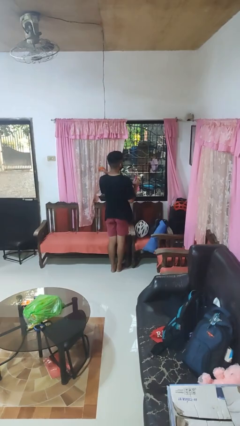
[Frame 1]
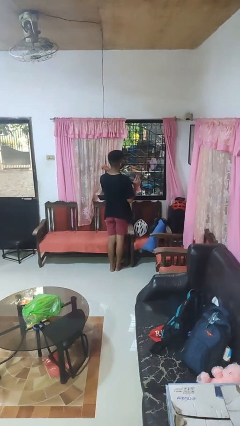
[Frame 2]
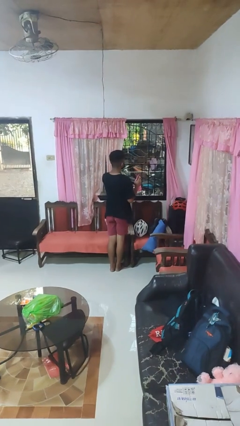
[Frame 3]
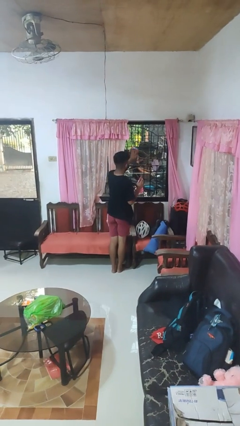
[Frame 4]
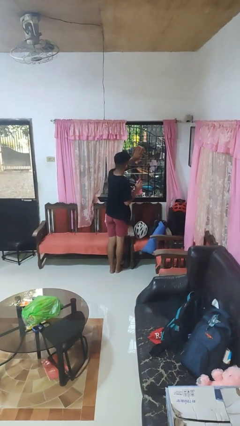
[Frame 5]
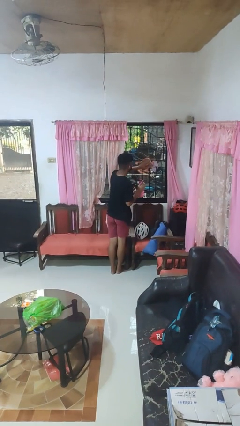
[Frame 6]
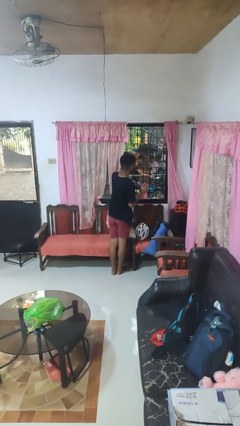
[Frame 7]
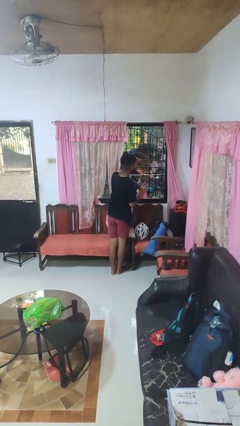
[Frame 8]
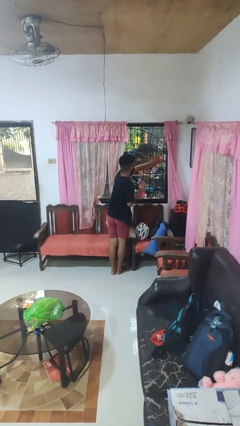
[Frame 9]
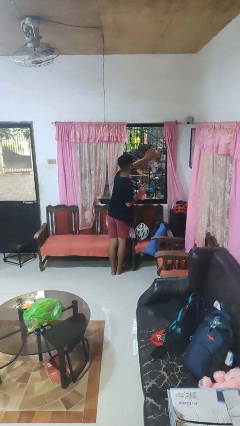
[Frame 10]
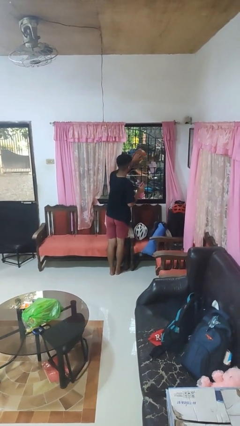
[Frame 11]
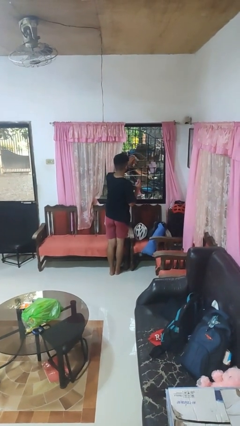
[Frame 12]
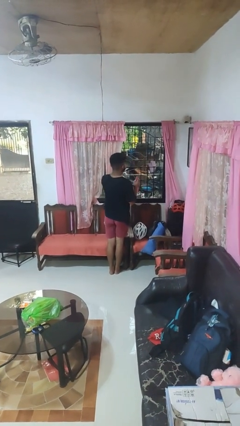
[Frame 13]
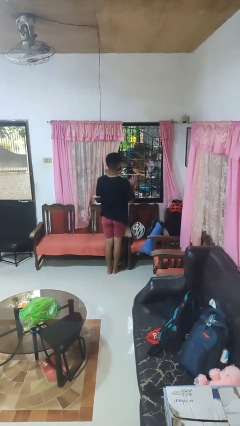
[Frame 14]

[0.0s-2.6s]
person washes window

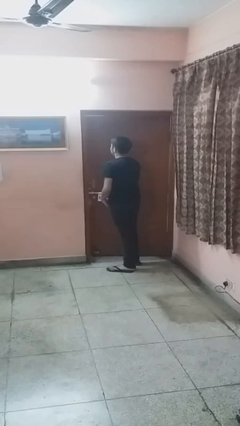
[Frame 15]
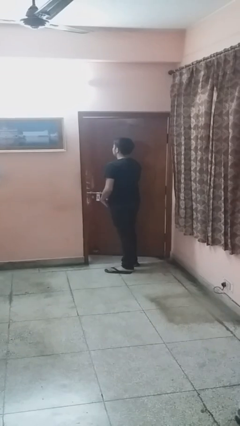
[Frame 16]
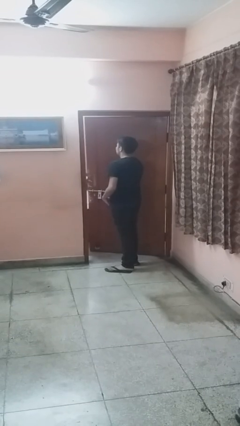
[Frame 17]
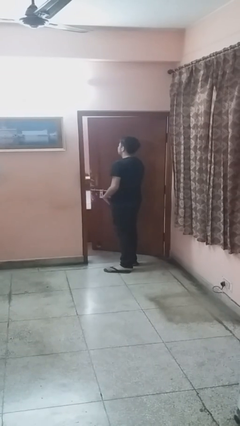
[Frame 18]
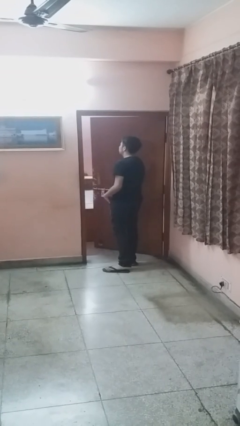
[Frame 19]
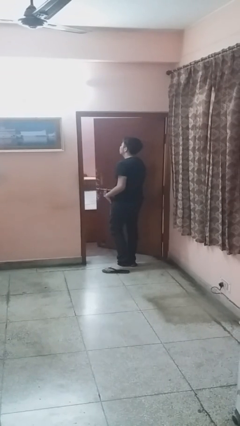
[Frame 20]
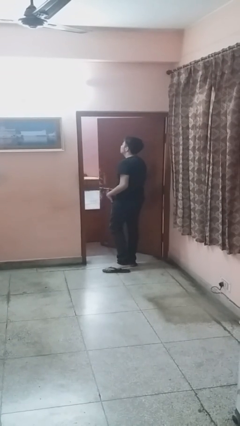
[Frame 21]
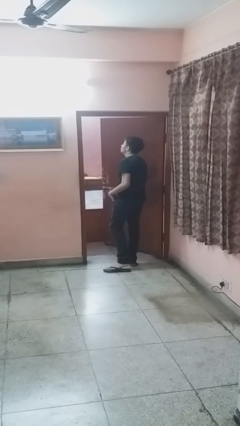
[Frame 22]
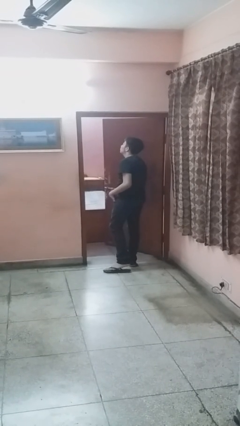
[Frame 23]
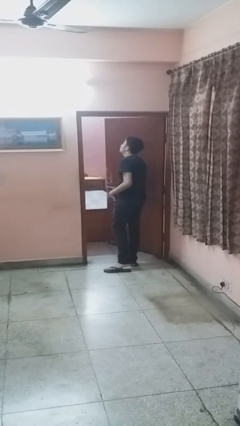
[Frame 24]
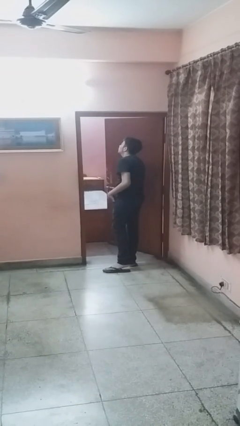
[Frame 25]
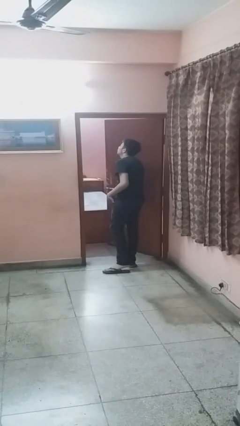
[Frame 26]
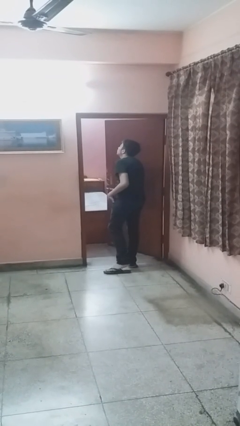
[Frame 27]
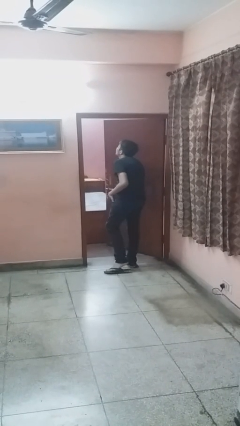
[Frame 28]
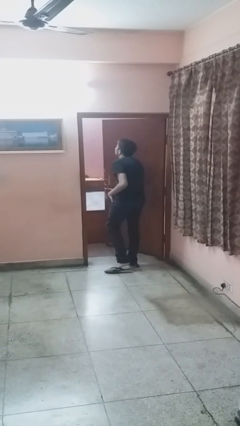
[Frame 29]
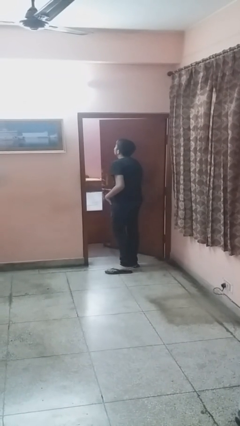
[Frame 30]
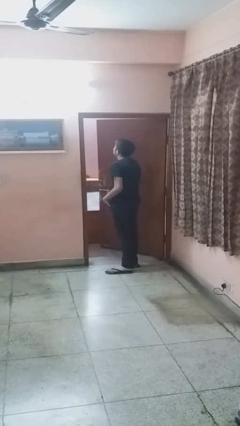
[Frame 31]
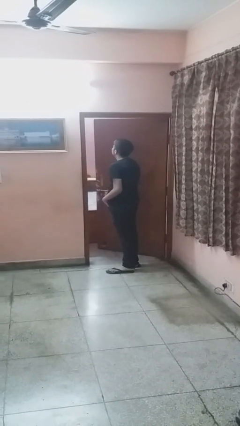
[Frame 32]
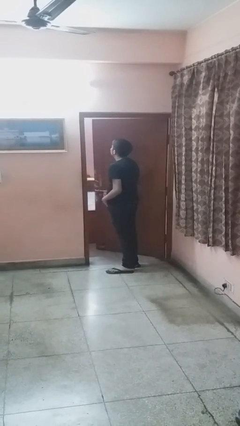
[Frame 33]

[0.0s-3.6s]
person opens facility door

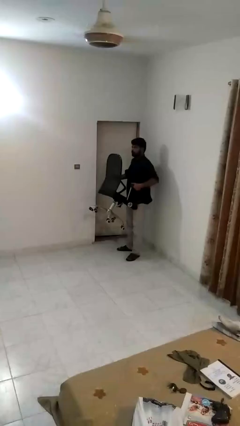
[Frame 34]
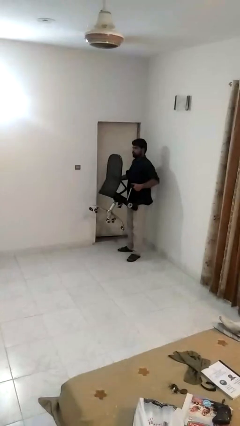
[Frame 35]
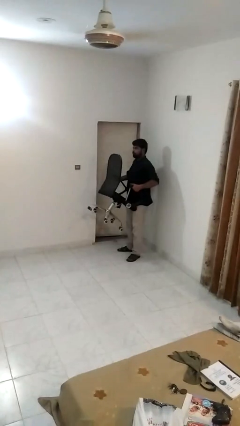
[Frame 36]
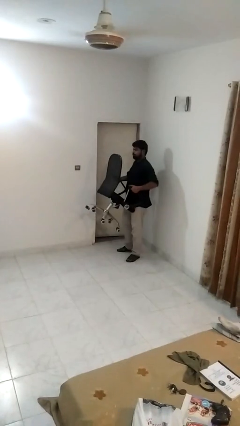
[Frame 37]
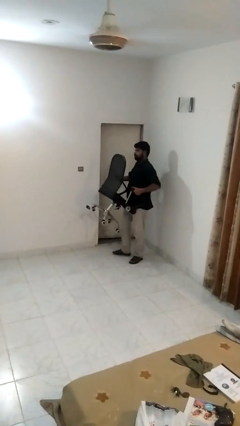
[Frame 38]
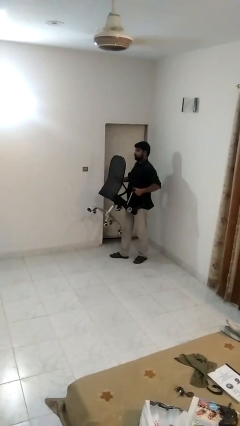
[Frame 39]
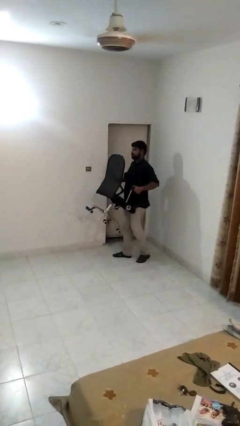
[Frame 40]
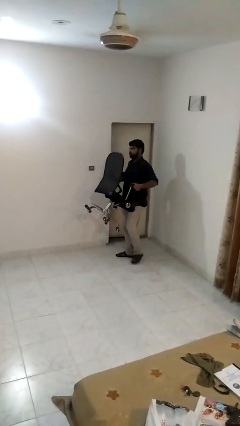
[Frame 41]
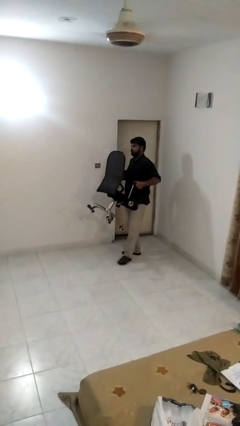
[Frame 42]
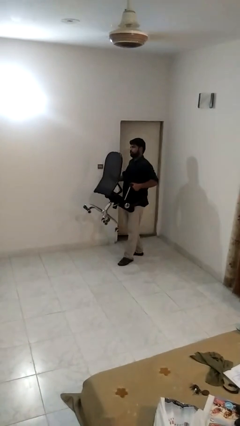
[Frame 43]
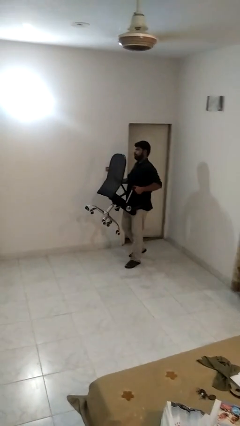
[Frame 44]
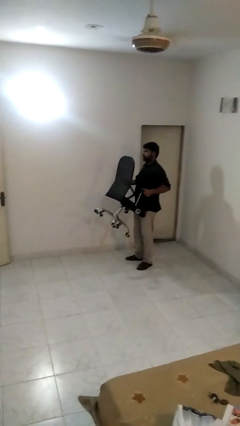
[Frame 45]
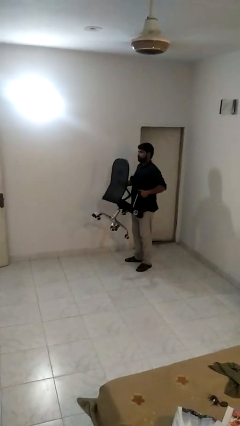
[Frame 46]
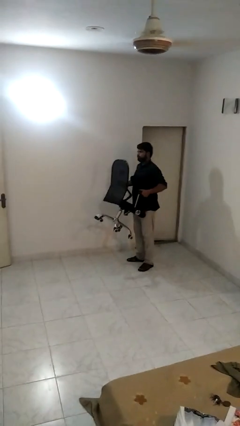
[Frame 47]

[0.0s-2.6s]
person carries furniture

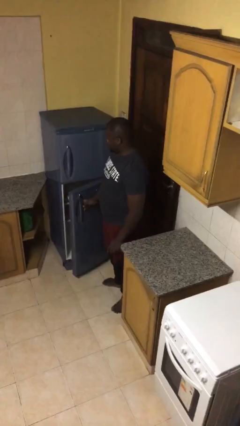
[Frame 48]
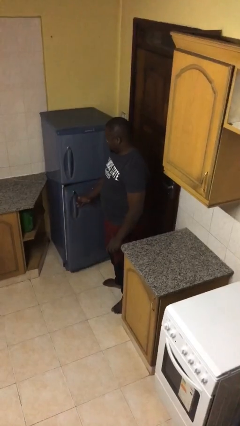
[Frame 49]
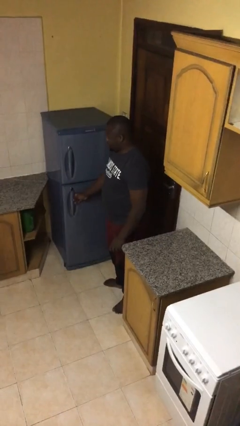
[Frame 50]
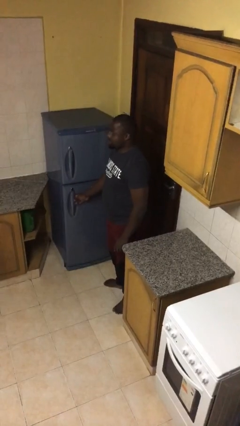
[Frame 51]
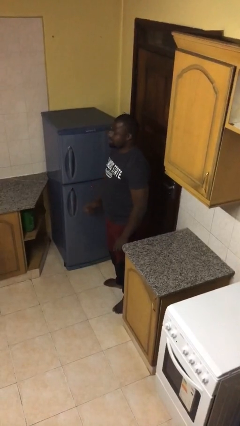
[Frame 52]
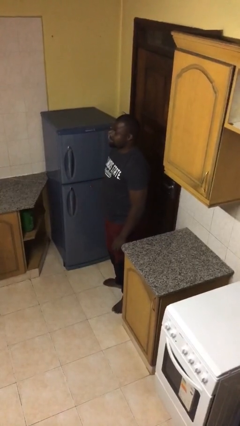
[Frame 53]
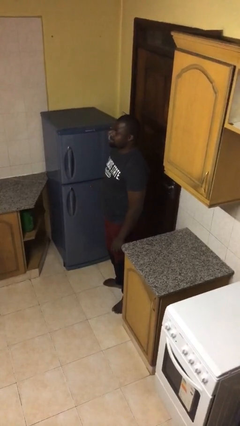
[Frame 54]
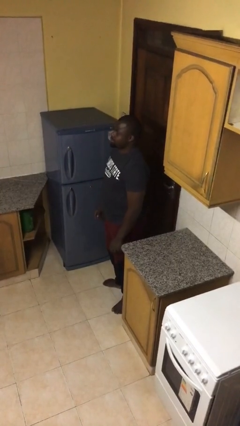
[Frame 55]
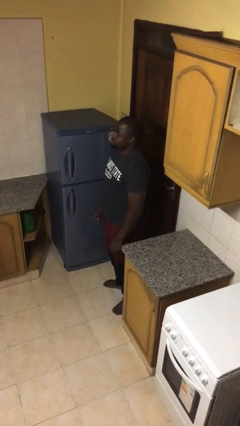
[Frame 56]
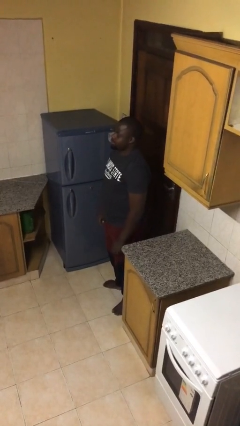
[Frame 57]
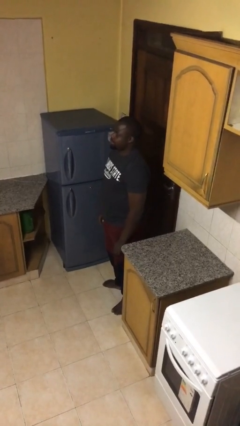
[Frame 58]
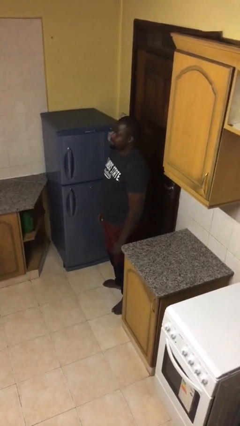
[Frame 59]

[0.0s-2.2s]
person closes refrigerator

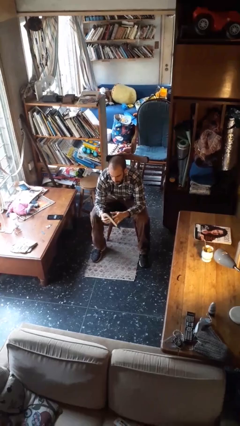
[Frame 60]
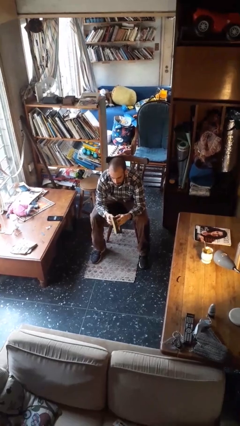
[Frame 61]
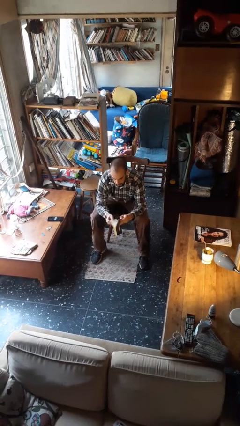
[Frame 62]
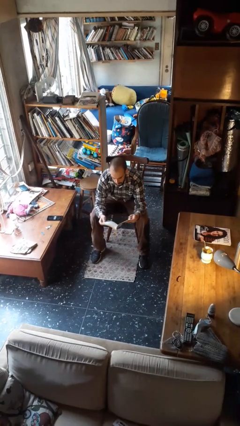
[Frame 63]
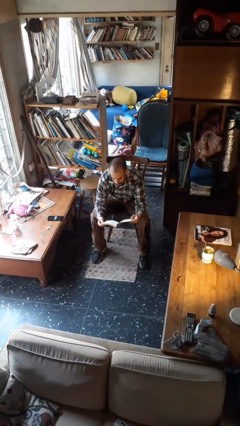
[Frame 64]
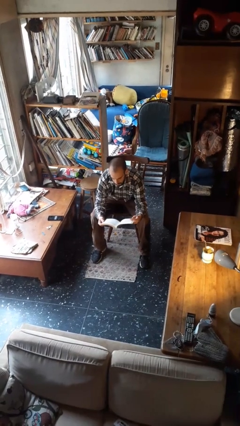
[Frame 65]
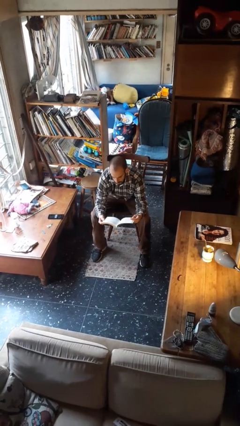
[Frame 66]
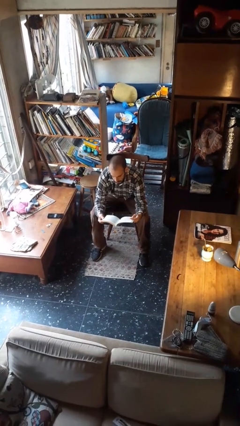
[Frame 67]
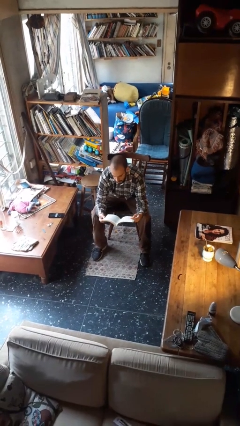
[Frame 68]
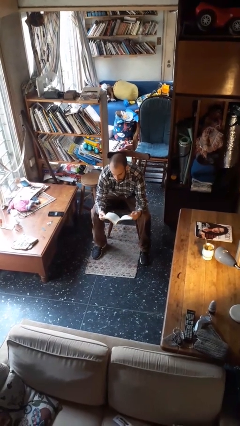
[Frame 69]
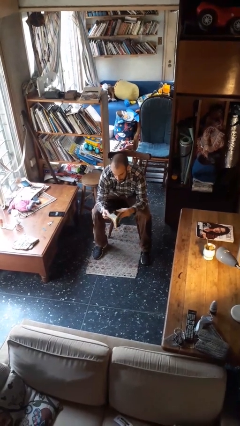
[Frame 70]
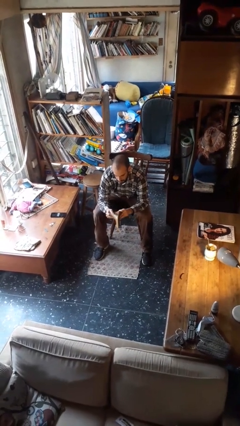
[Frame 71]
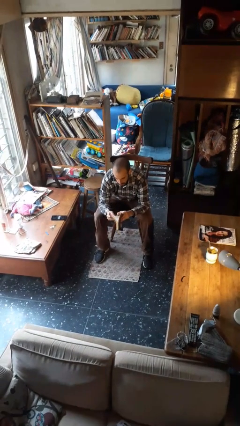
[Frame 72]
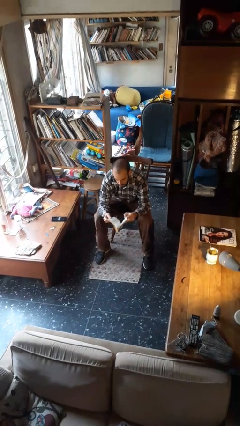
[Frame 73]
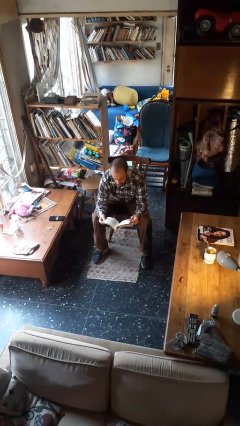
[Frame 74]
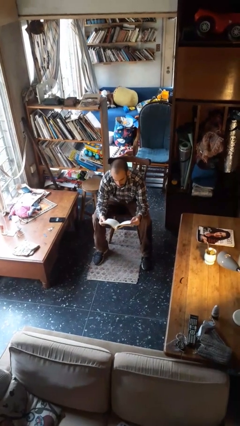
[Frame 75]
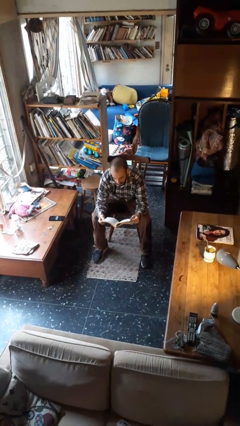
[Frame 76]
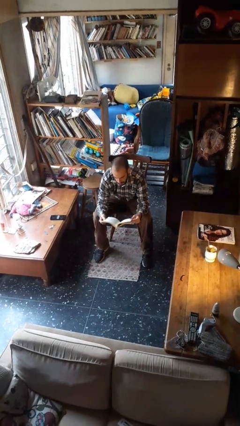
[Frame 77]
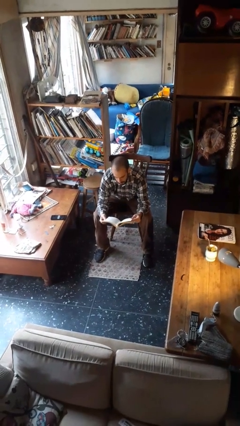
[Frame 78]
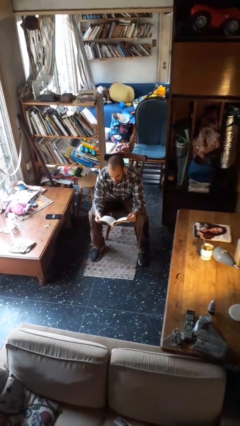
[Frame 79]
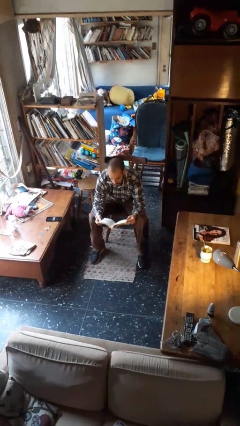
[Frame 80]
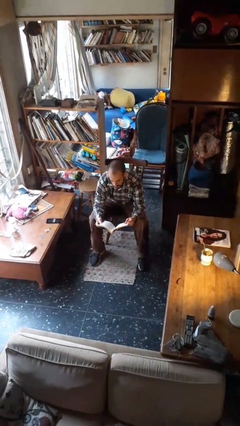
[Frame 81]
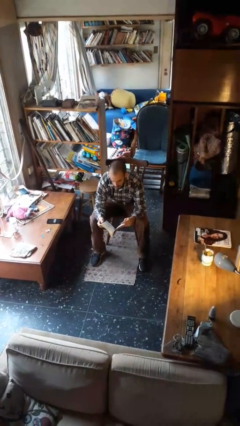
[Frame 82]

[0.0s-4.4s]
person reads book

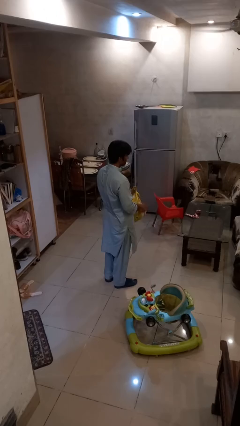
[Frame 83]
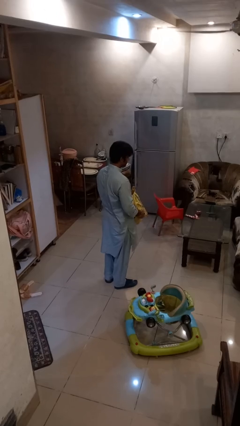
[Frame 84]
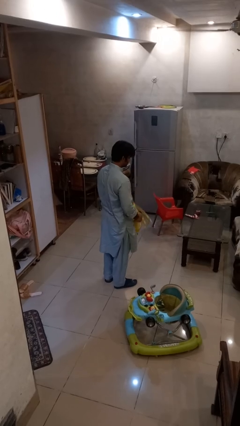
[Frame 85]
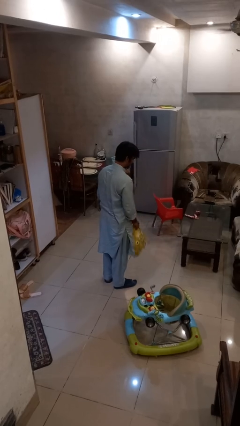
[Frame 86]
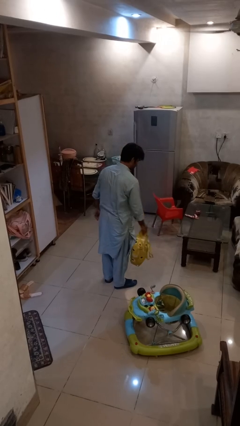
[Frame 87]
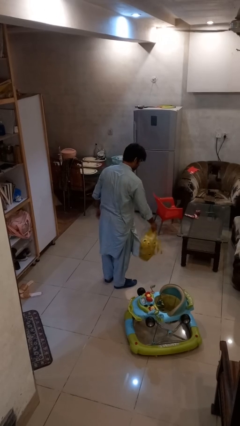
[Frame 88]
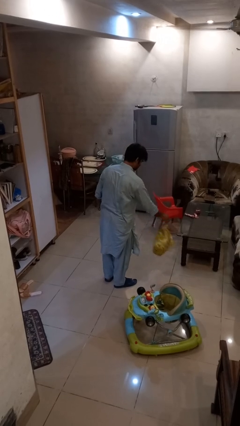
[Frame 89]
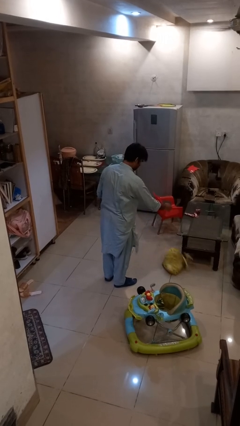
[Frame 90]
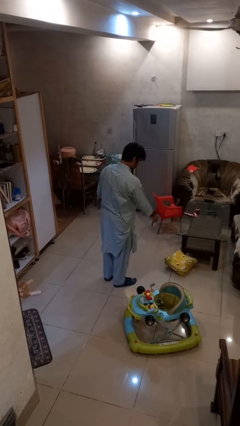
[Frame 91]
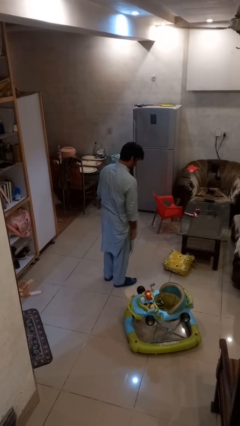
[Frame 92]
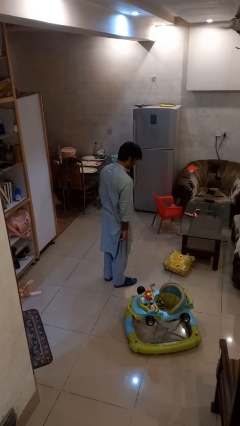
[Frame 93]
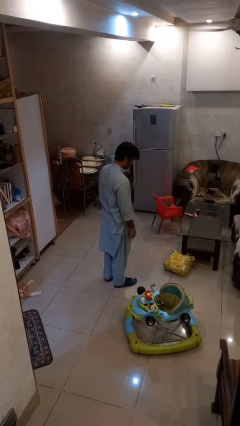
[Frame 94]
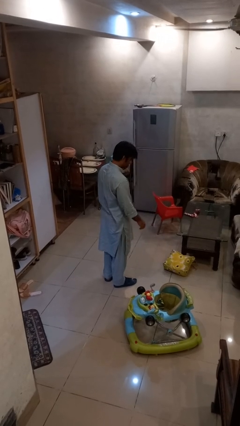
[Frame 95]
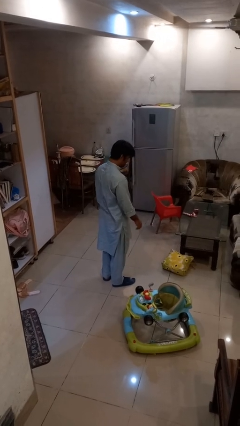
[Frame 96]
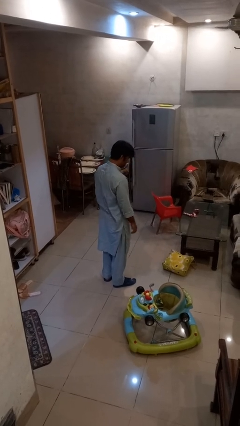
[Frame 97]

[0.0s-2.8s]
person throws object to ground
